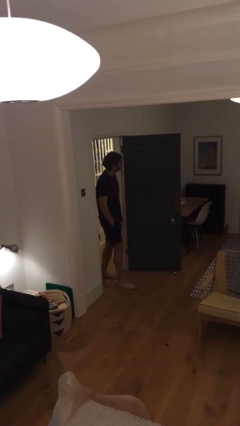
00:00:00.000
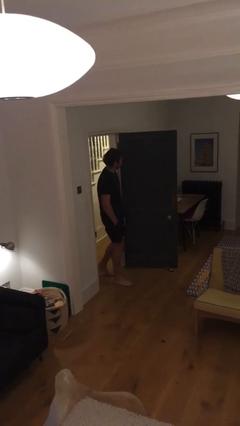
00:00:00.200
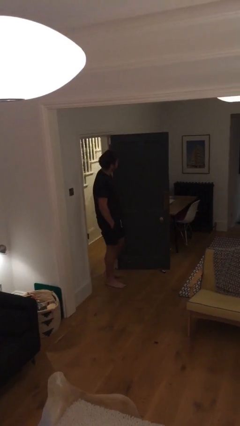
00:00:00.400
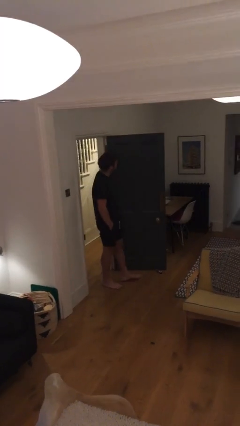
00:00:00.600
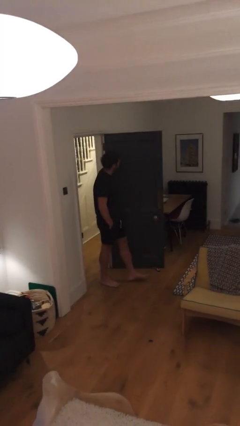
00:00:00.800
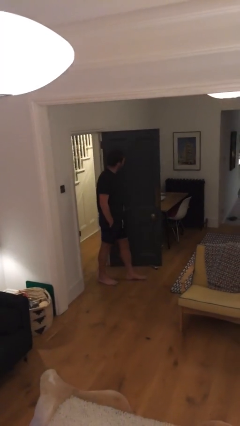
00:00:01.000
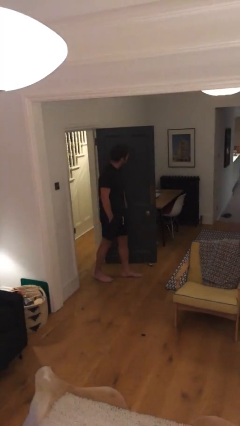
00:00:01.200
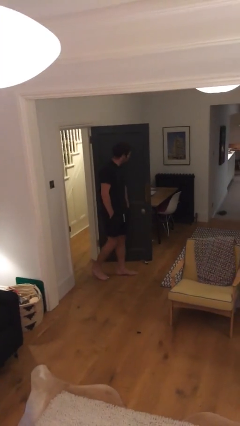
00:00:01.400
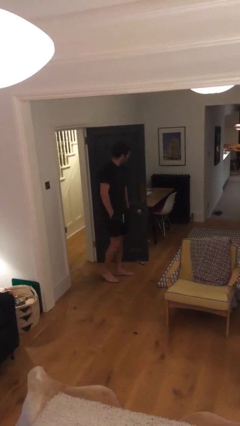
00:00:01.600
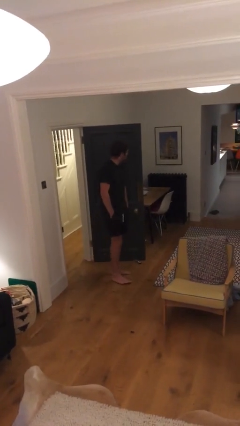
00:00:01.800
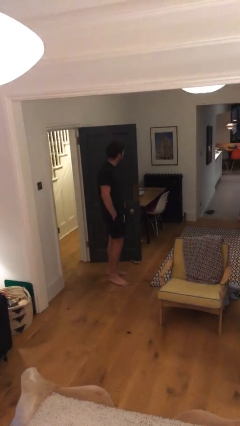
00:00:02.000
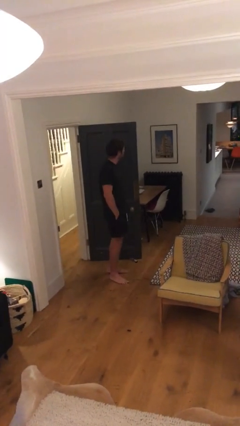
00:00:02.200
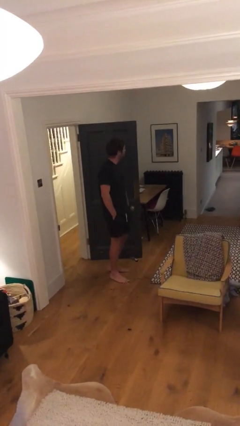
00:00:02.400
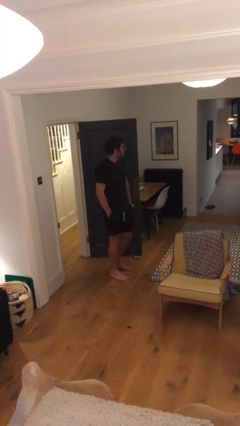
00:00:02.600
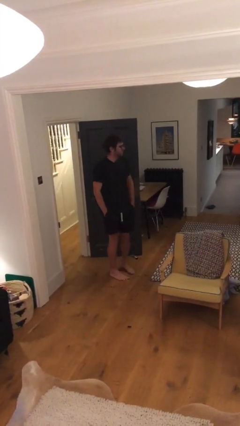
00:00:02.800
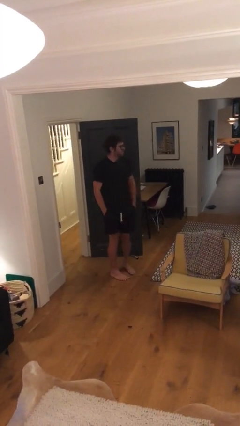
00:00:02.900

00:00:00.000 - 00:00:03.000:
person enters scene through structure

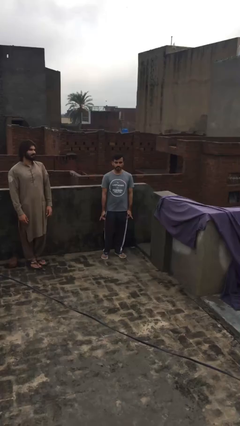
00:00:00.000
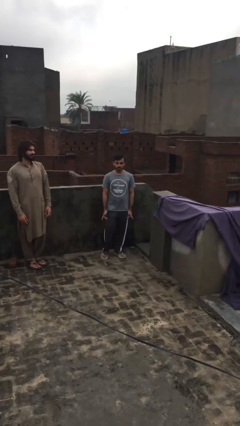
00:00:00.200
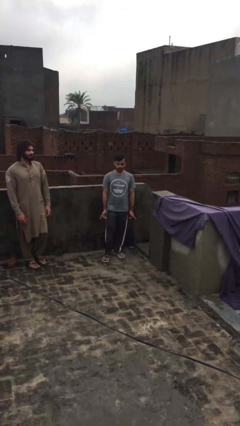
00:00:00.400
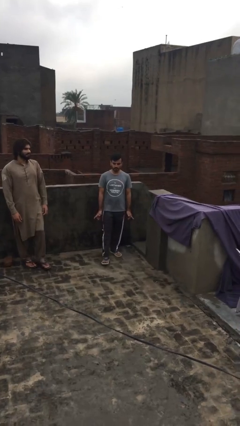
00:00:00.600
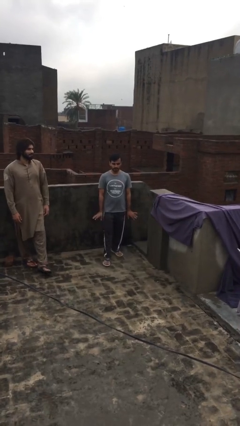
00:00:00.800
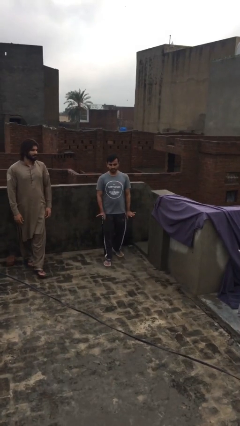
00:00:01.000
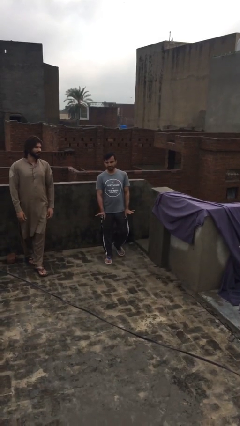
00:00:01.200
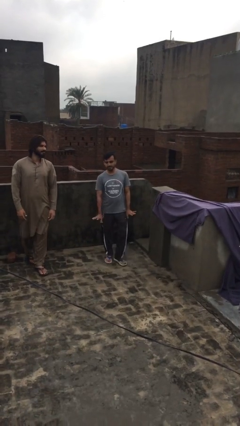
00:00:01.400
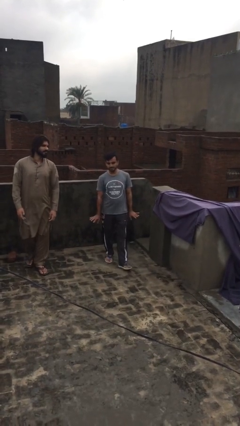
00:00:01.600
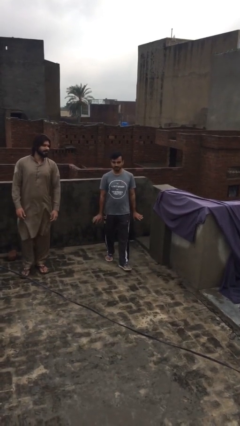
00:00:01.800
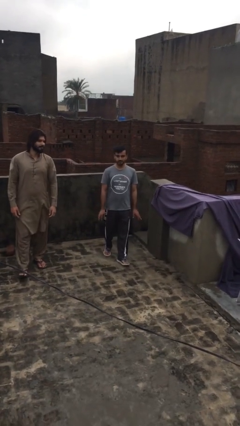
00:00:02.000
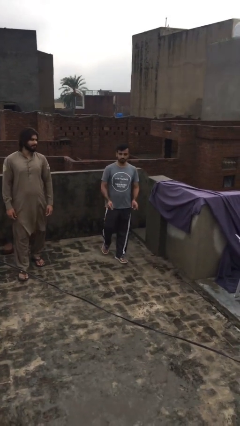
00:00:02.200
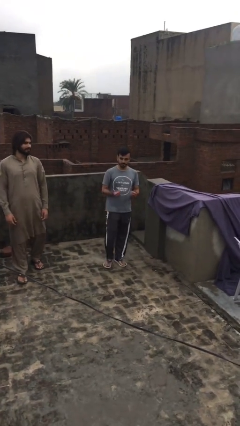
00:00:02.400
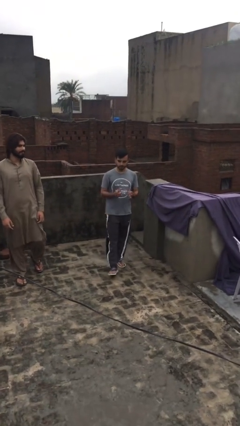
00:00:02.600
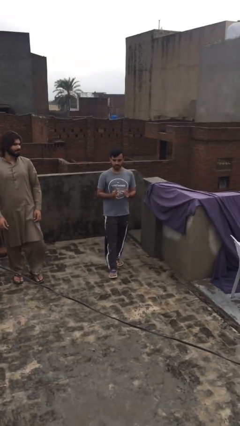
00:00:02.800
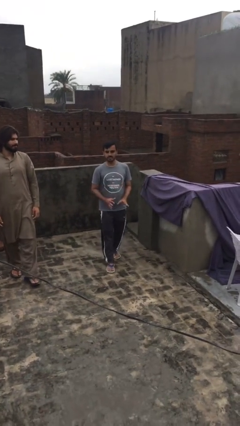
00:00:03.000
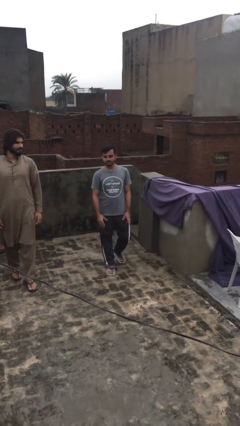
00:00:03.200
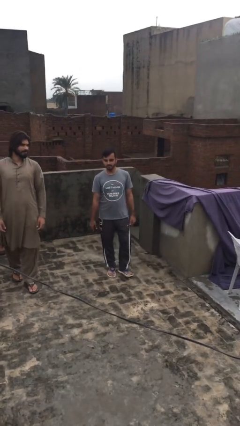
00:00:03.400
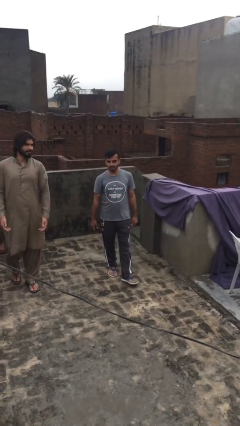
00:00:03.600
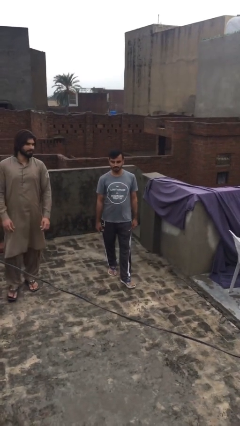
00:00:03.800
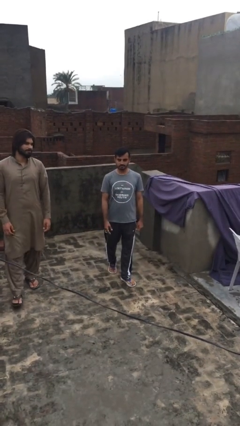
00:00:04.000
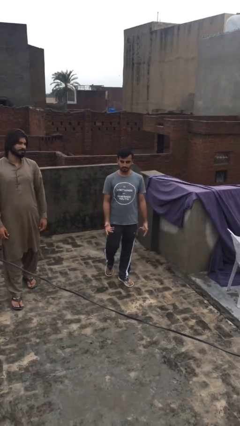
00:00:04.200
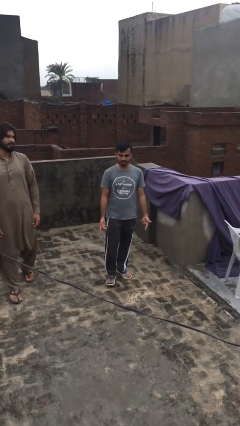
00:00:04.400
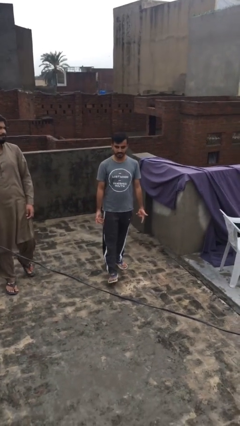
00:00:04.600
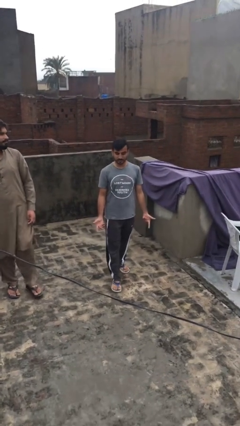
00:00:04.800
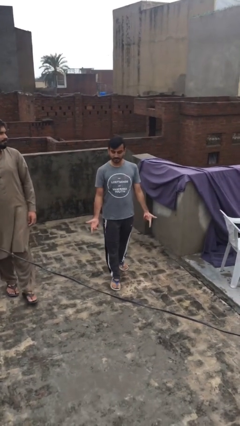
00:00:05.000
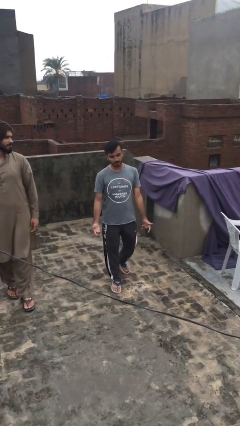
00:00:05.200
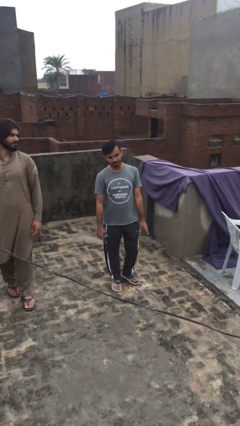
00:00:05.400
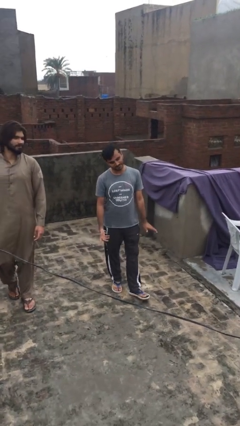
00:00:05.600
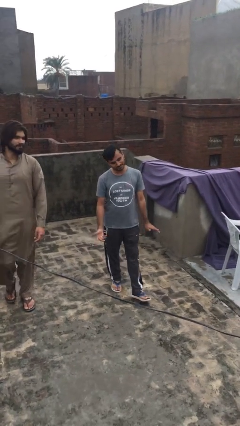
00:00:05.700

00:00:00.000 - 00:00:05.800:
person talks to person

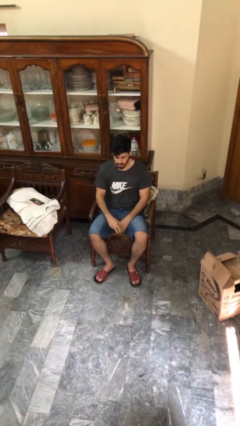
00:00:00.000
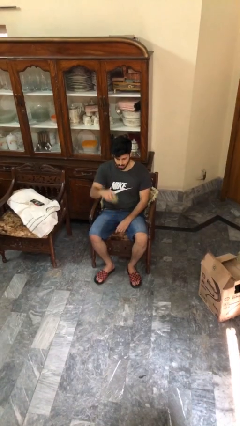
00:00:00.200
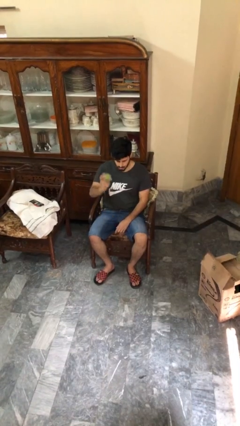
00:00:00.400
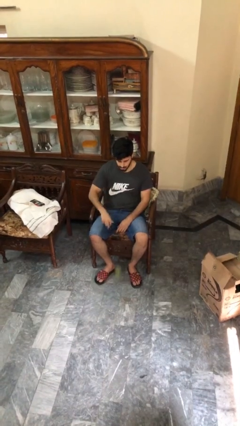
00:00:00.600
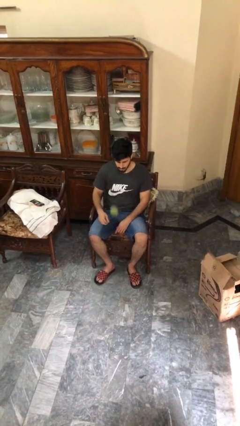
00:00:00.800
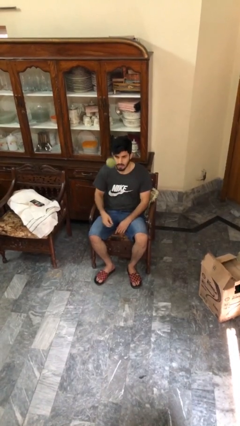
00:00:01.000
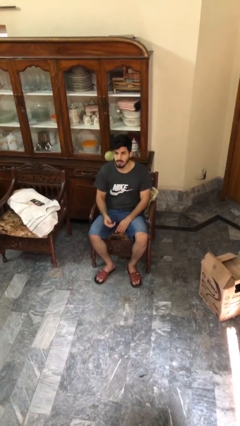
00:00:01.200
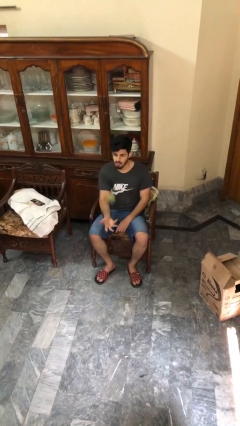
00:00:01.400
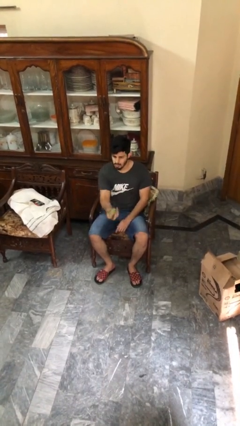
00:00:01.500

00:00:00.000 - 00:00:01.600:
person bounces ball on floor

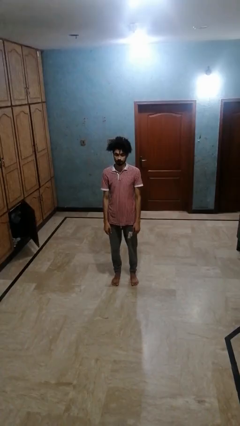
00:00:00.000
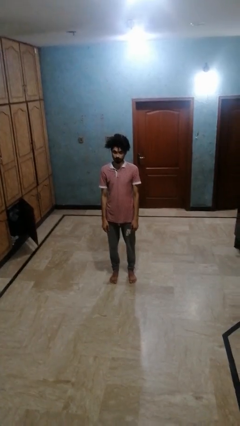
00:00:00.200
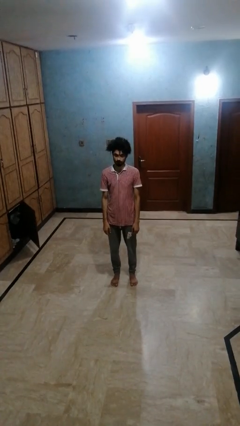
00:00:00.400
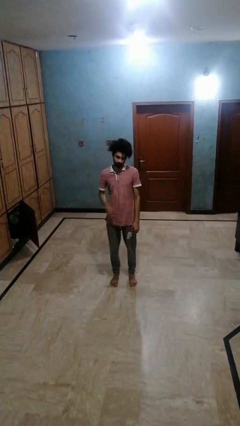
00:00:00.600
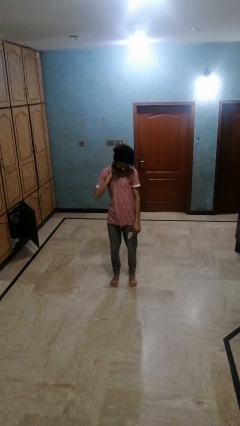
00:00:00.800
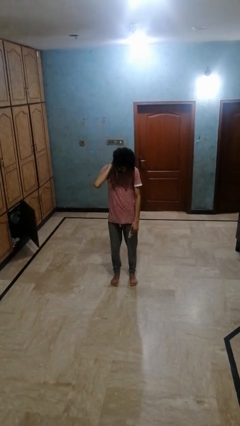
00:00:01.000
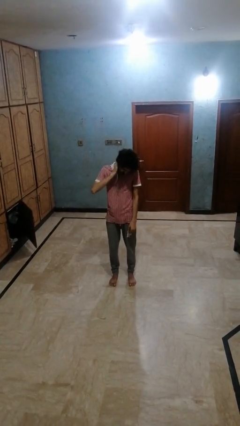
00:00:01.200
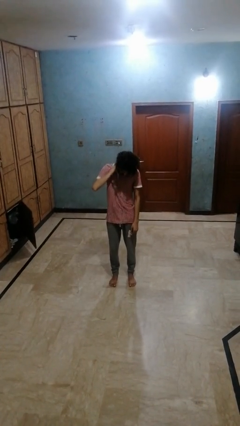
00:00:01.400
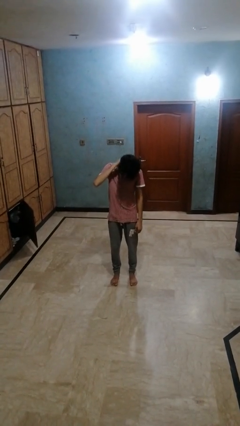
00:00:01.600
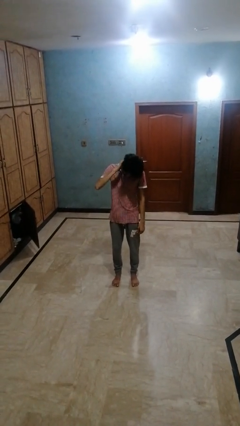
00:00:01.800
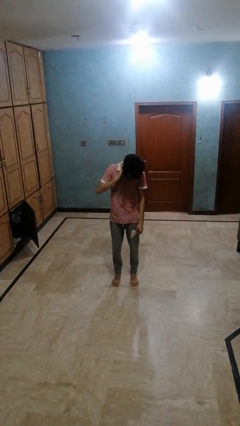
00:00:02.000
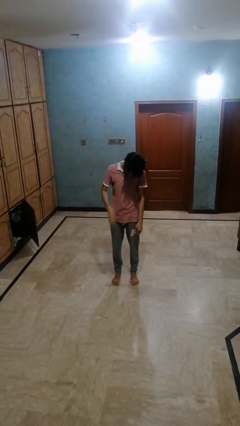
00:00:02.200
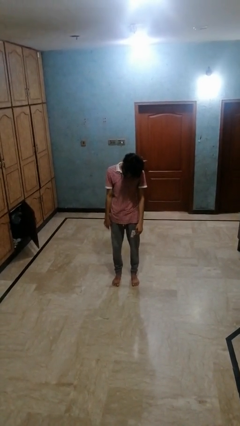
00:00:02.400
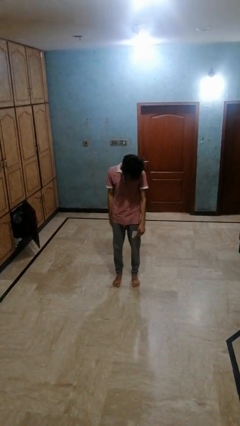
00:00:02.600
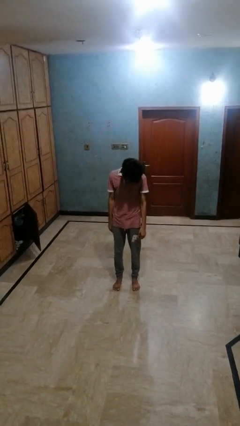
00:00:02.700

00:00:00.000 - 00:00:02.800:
person rubs neck

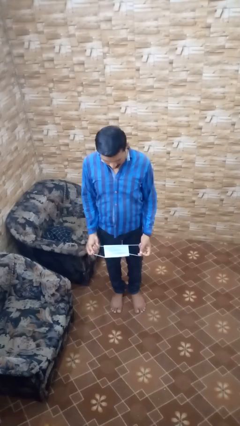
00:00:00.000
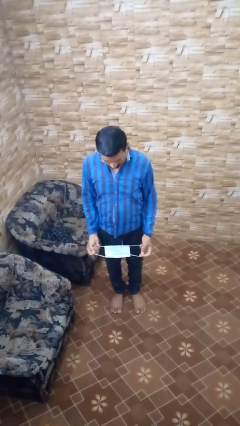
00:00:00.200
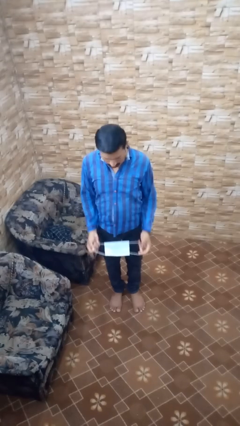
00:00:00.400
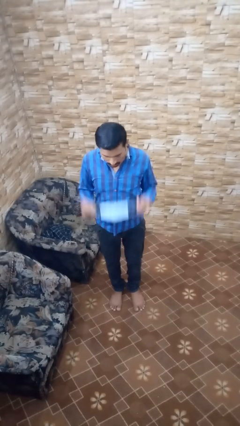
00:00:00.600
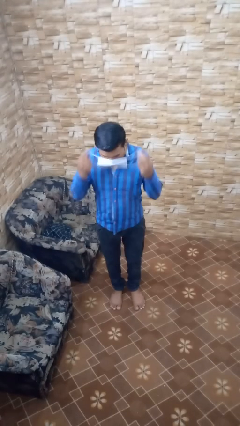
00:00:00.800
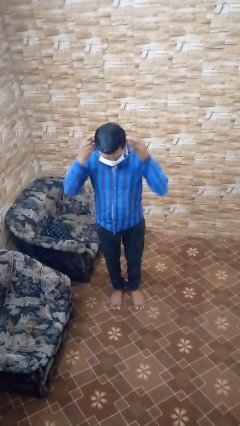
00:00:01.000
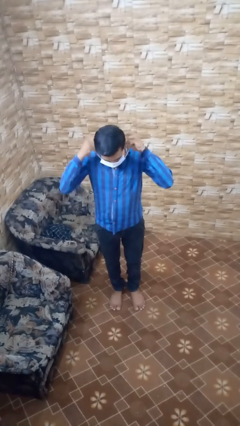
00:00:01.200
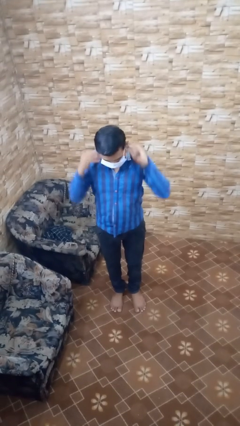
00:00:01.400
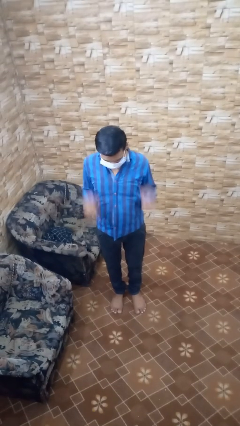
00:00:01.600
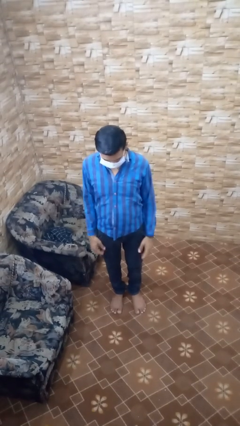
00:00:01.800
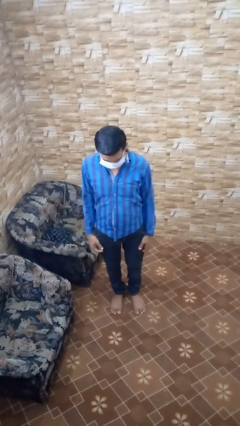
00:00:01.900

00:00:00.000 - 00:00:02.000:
person puts on facemask

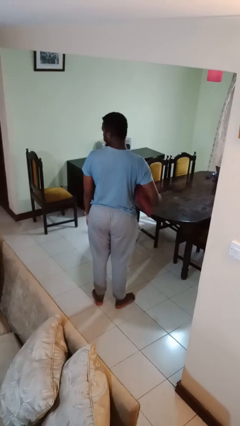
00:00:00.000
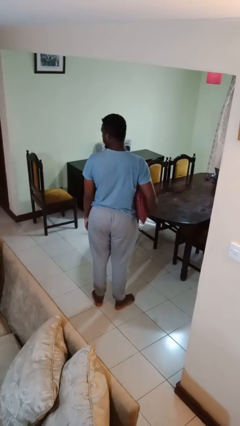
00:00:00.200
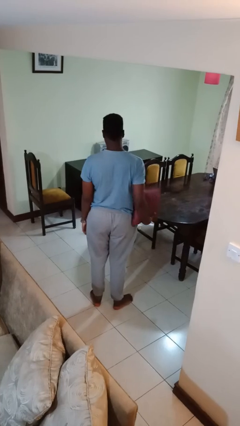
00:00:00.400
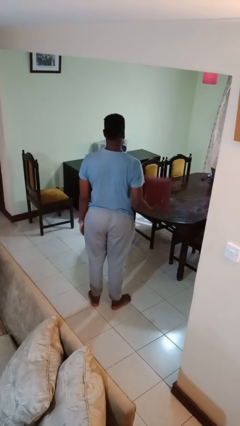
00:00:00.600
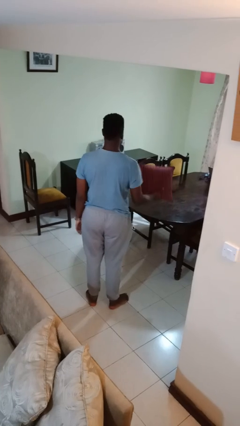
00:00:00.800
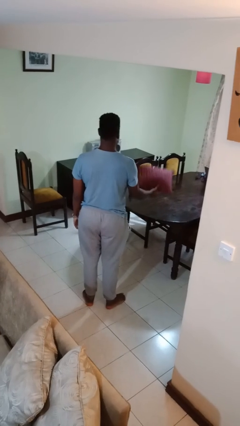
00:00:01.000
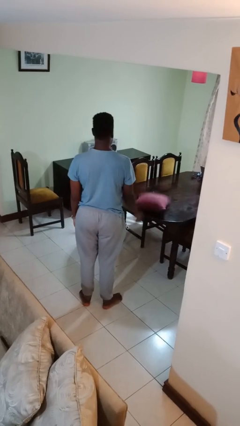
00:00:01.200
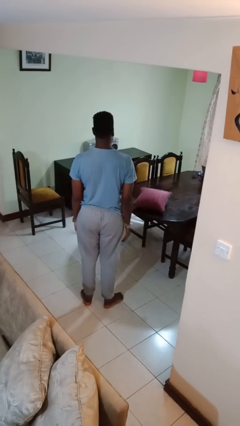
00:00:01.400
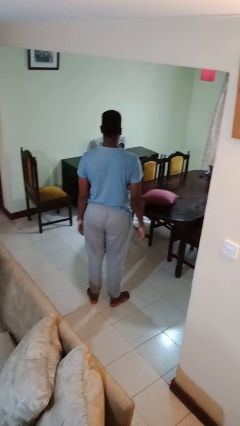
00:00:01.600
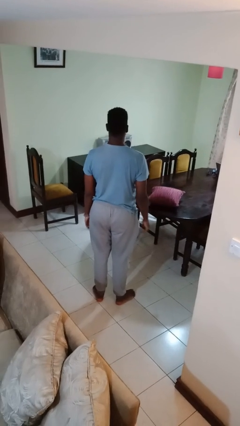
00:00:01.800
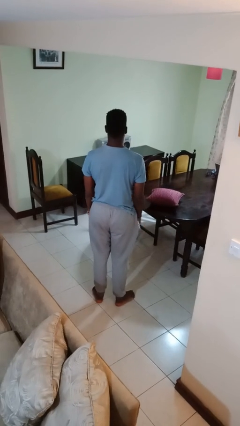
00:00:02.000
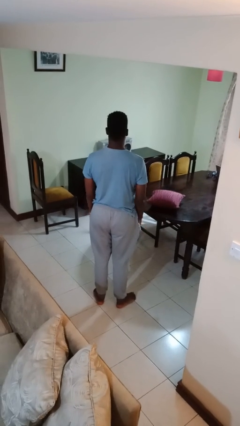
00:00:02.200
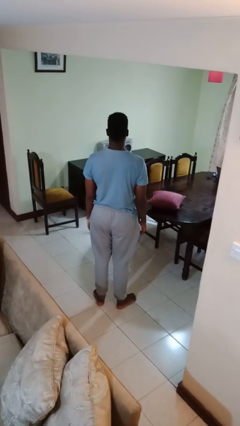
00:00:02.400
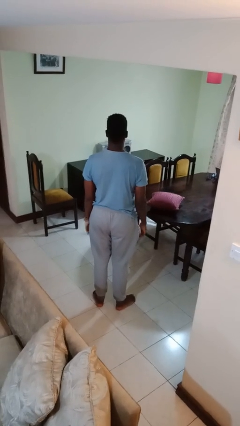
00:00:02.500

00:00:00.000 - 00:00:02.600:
person throws object on table
